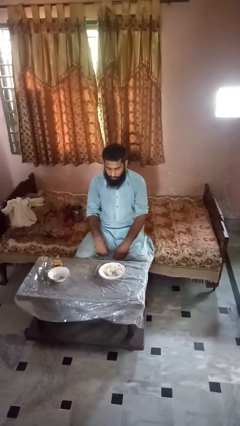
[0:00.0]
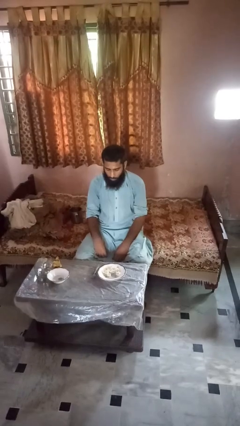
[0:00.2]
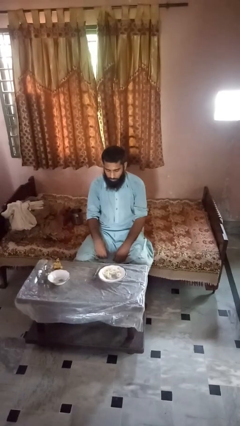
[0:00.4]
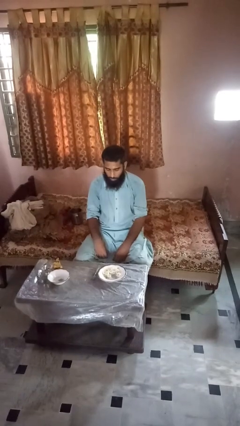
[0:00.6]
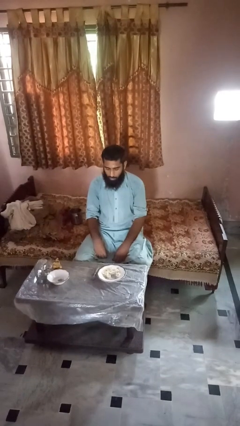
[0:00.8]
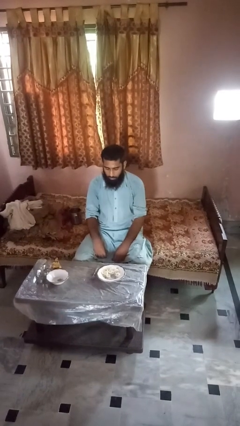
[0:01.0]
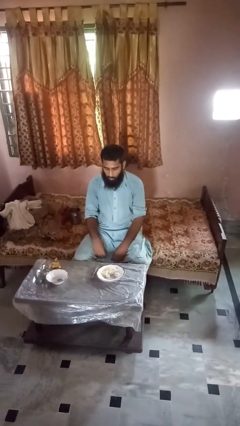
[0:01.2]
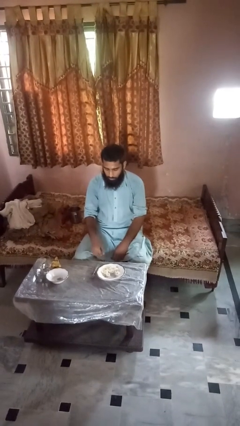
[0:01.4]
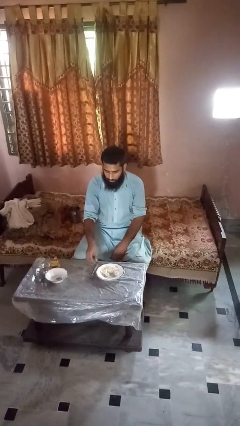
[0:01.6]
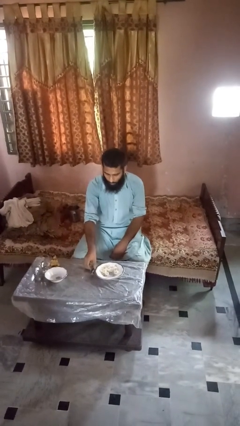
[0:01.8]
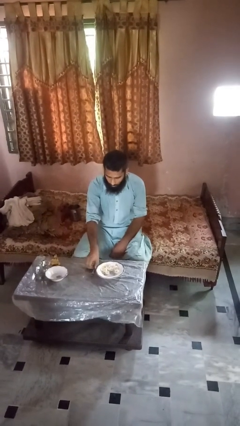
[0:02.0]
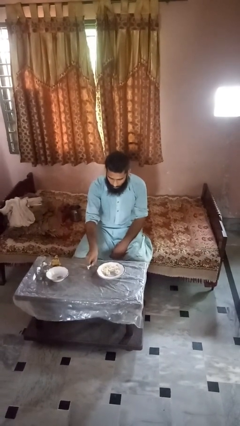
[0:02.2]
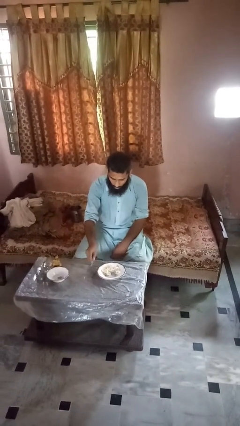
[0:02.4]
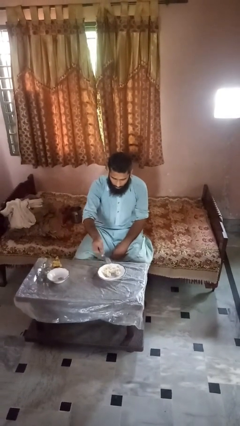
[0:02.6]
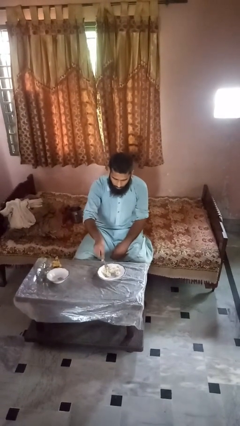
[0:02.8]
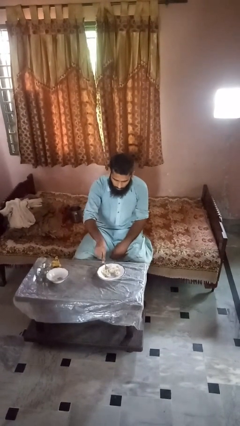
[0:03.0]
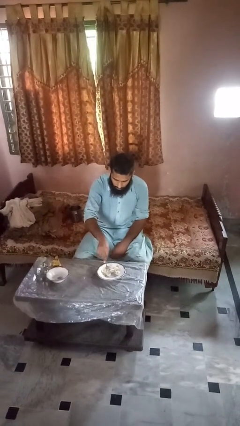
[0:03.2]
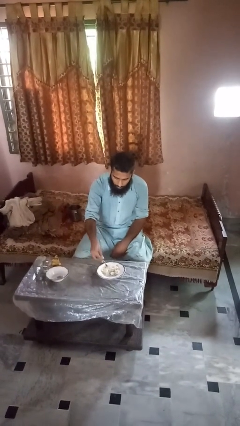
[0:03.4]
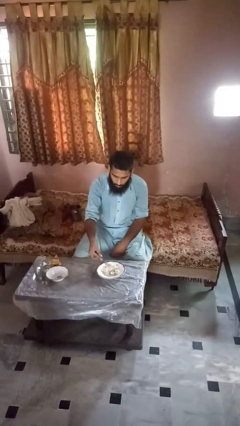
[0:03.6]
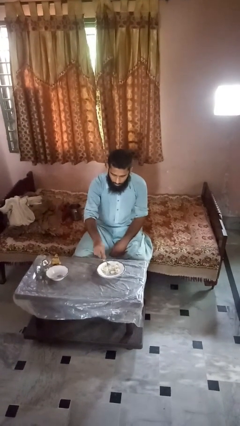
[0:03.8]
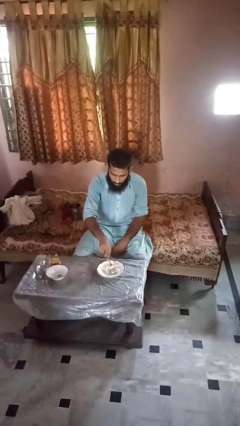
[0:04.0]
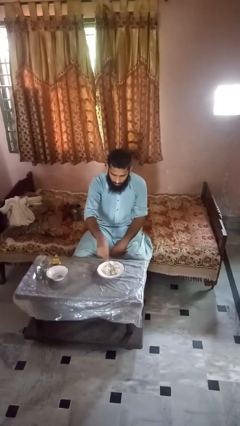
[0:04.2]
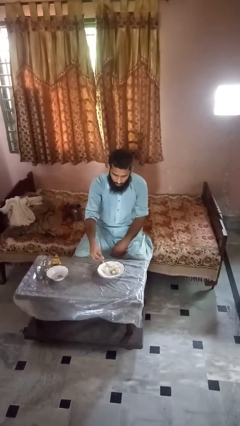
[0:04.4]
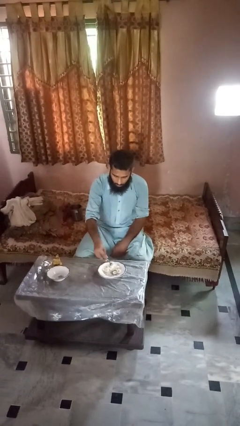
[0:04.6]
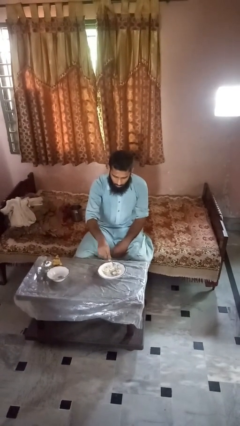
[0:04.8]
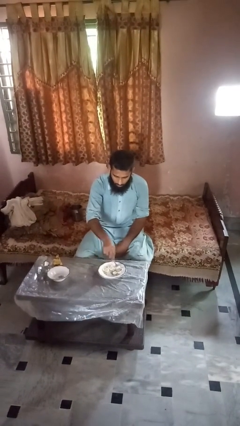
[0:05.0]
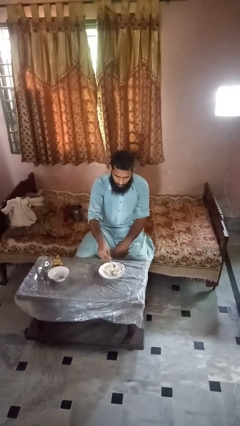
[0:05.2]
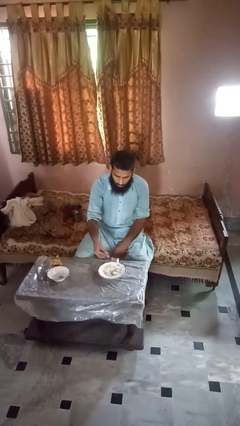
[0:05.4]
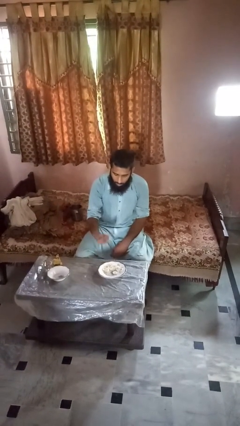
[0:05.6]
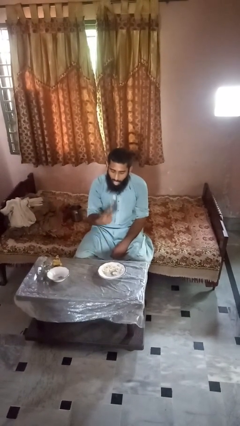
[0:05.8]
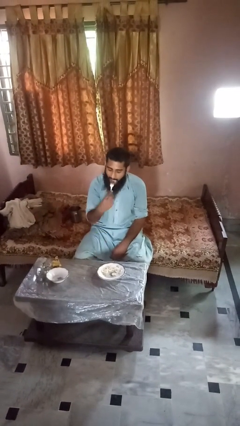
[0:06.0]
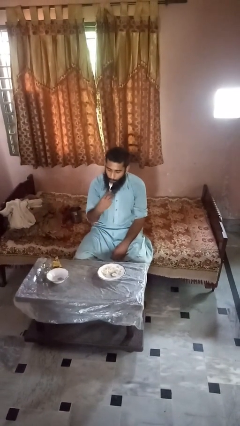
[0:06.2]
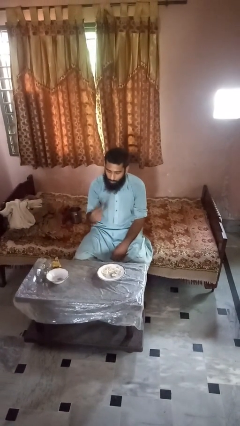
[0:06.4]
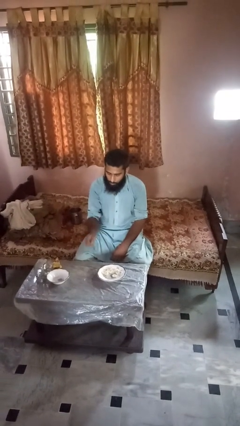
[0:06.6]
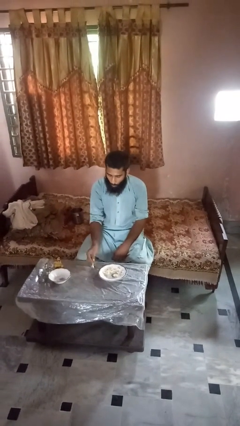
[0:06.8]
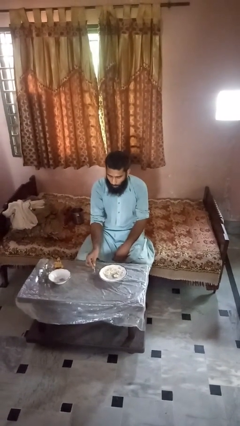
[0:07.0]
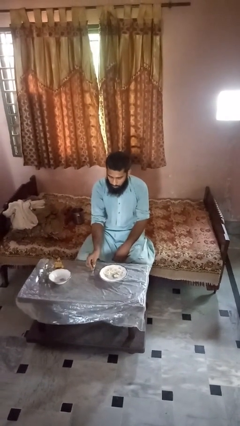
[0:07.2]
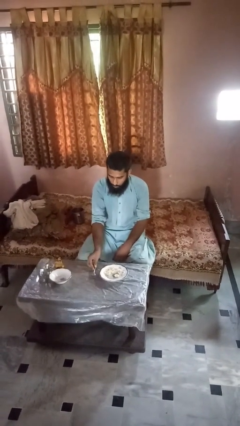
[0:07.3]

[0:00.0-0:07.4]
person eats with utensil

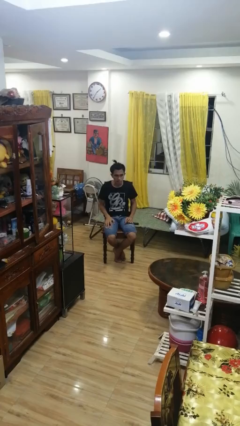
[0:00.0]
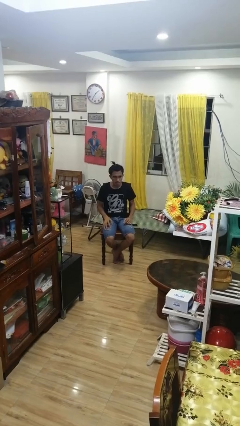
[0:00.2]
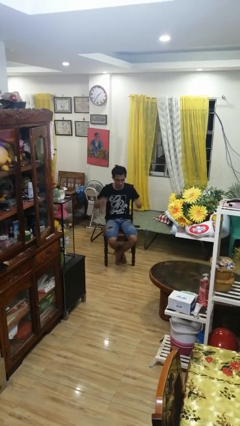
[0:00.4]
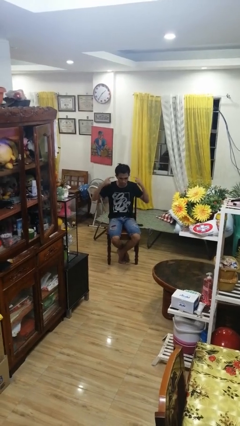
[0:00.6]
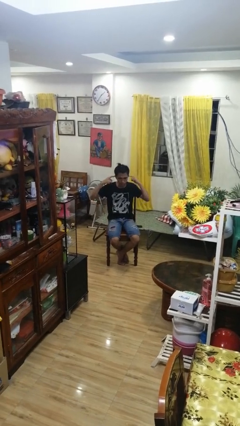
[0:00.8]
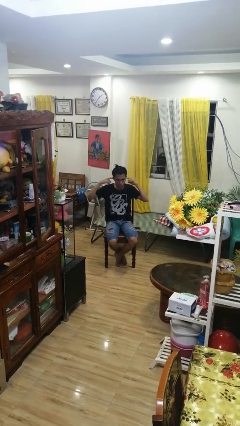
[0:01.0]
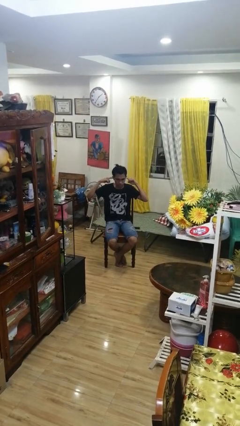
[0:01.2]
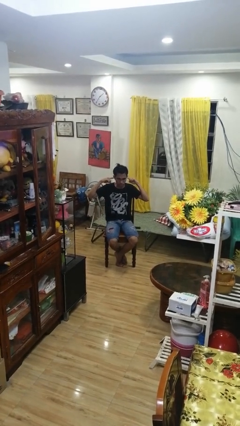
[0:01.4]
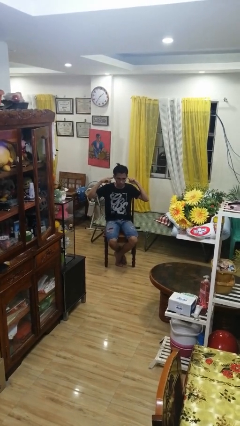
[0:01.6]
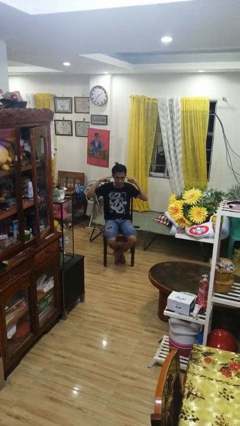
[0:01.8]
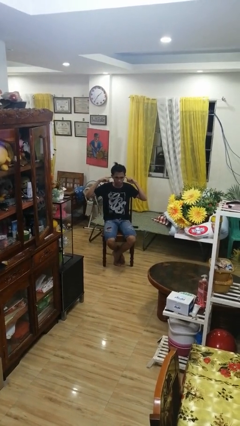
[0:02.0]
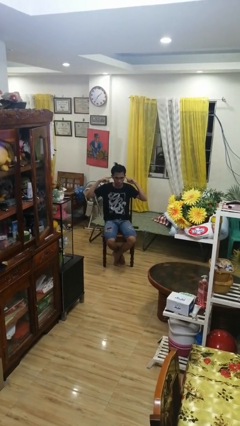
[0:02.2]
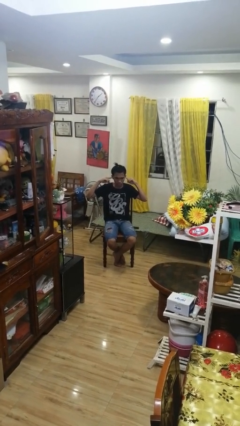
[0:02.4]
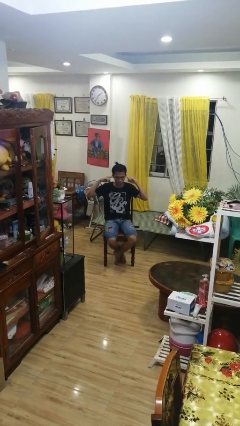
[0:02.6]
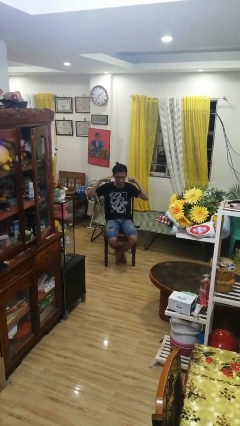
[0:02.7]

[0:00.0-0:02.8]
person puts fingers in ear

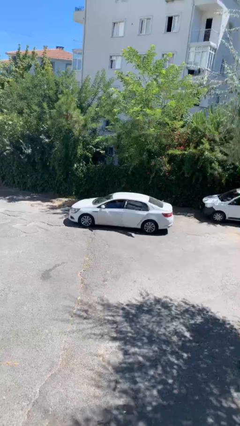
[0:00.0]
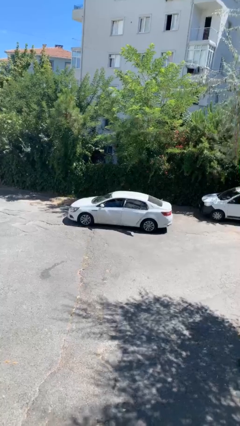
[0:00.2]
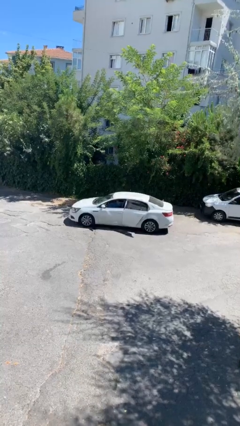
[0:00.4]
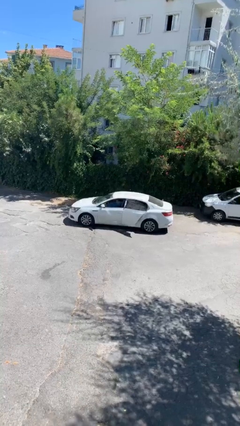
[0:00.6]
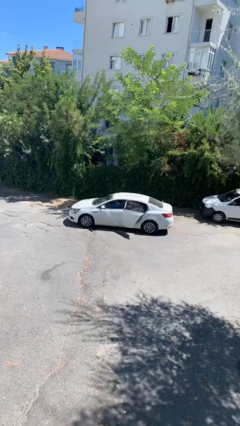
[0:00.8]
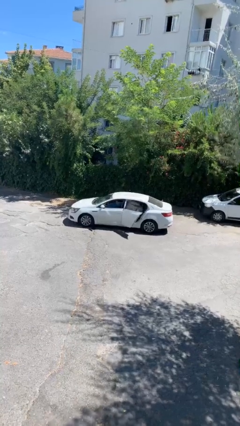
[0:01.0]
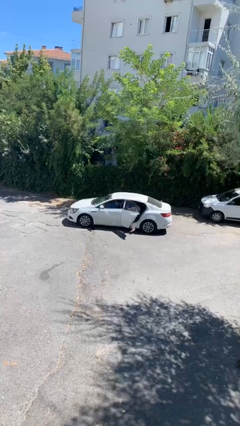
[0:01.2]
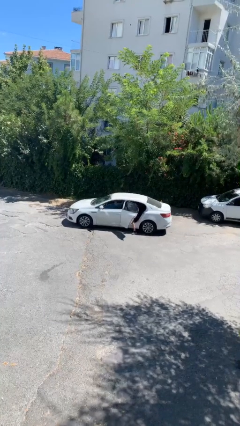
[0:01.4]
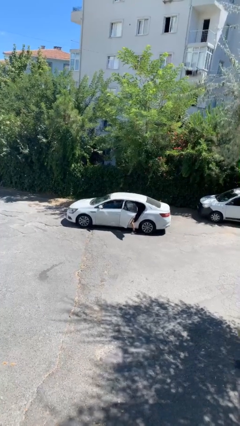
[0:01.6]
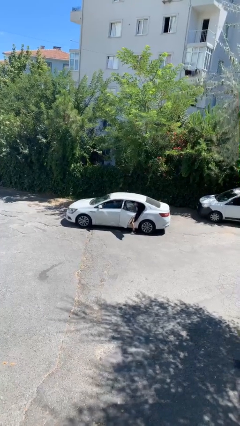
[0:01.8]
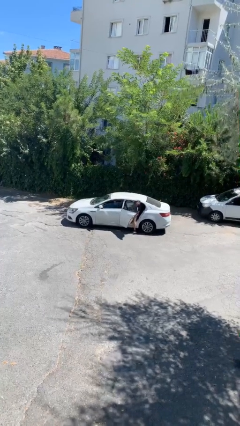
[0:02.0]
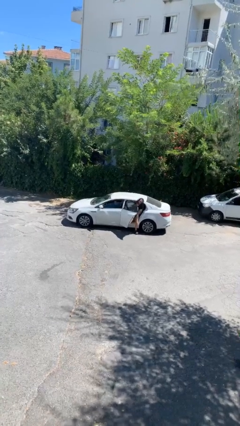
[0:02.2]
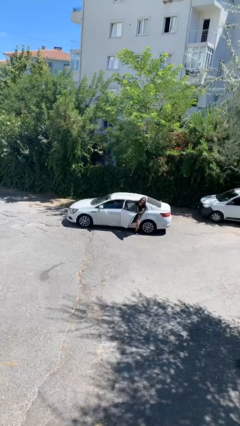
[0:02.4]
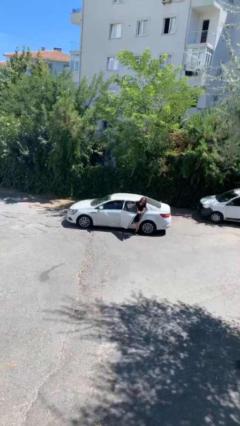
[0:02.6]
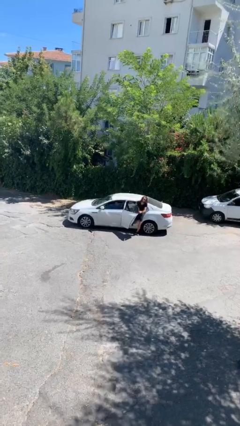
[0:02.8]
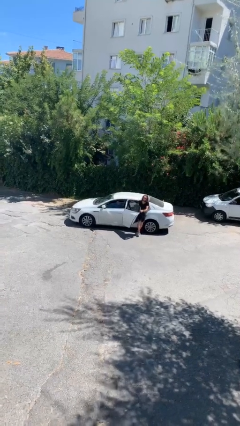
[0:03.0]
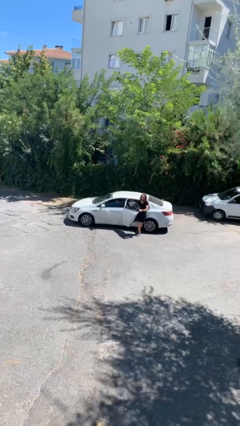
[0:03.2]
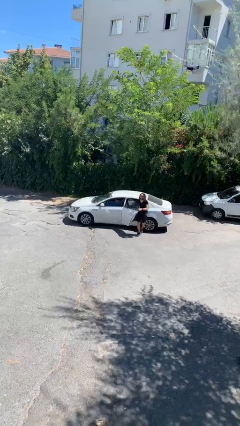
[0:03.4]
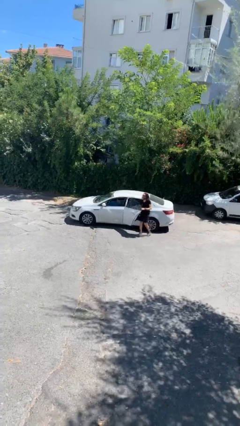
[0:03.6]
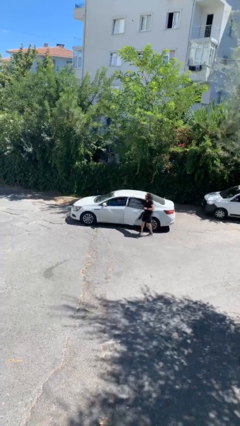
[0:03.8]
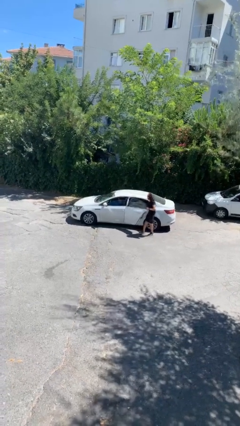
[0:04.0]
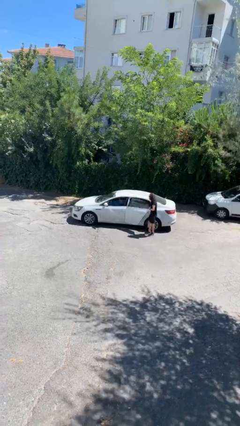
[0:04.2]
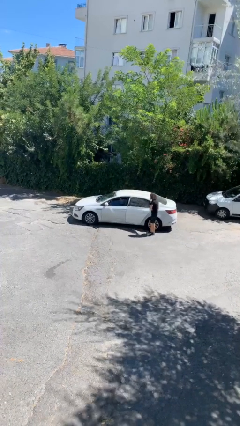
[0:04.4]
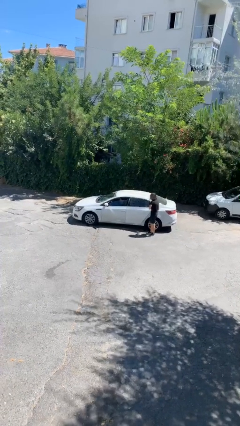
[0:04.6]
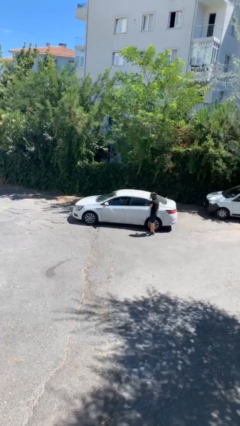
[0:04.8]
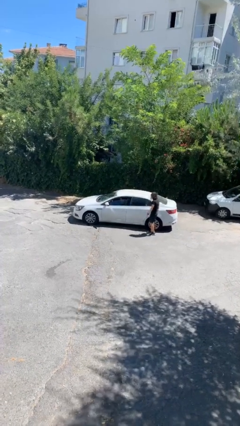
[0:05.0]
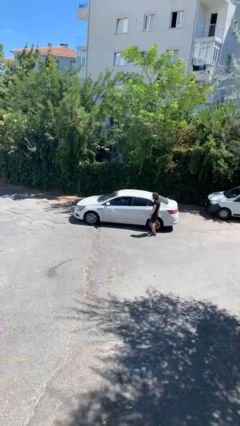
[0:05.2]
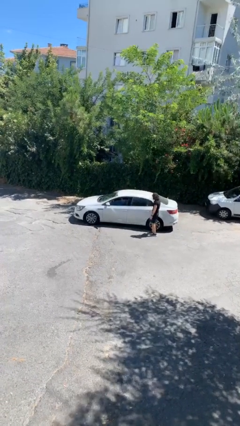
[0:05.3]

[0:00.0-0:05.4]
car drops off person

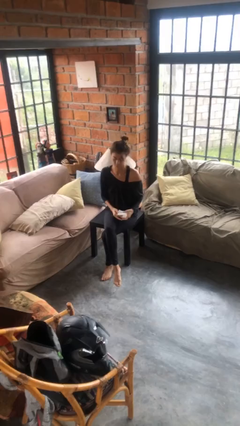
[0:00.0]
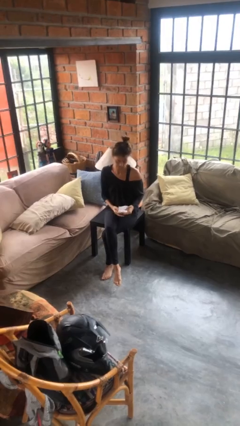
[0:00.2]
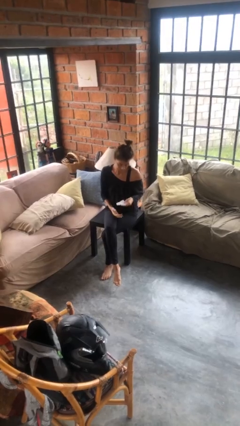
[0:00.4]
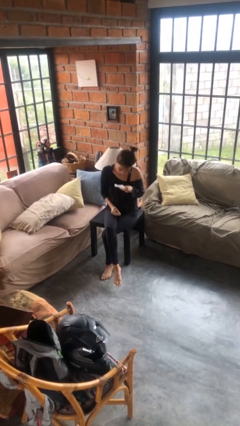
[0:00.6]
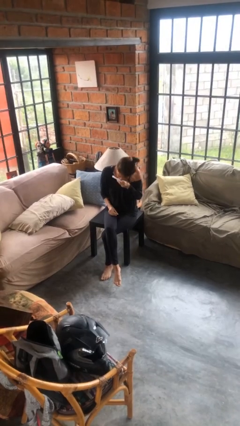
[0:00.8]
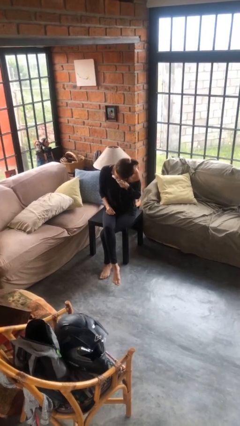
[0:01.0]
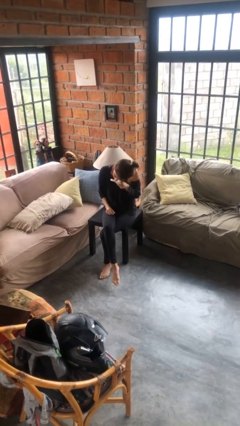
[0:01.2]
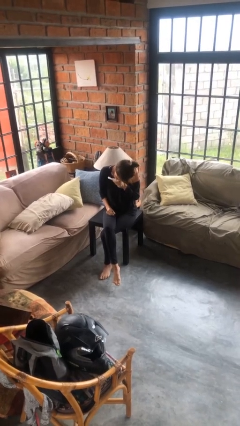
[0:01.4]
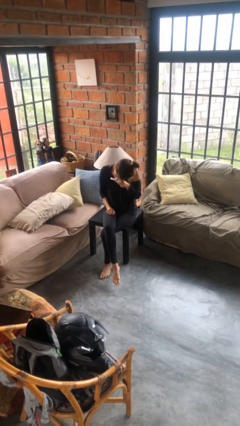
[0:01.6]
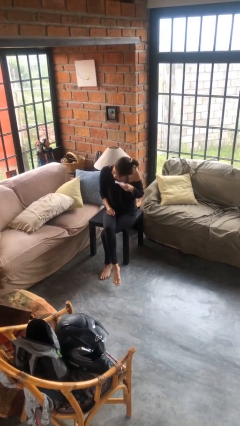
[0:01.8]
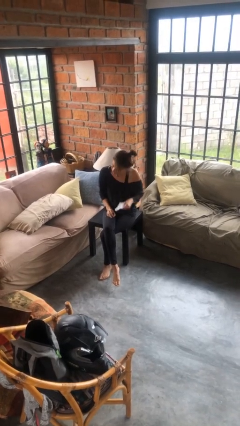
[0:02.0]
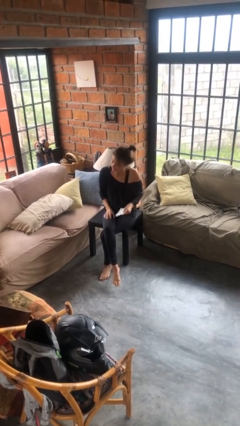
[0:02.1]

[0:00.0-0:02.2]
person wipes mouth with napkin
